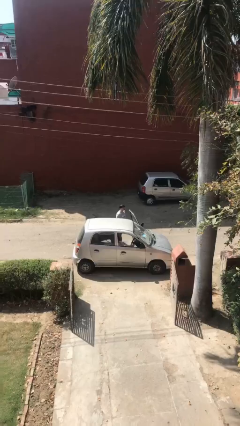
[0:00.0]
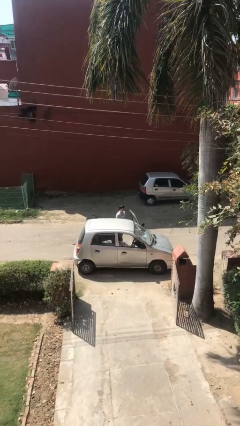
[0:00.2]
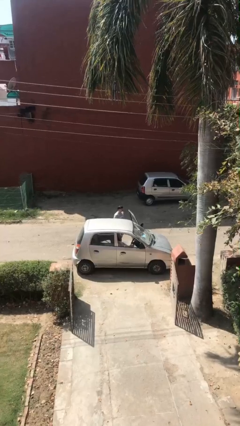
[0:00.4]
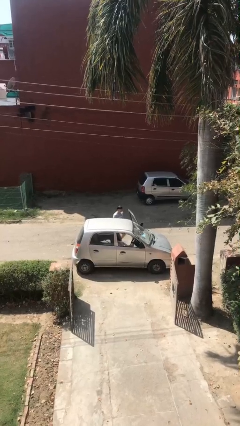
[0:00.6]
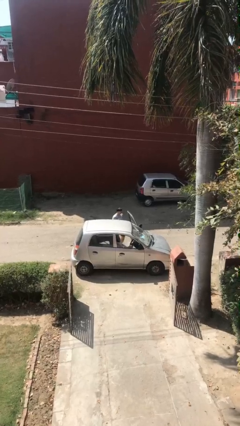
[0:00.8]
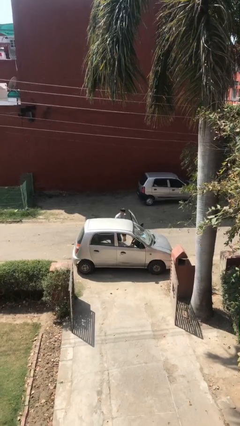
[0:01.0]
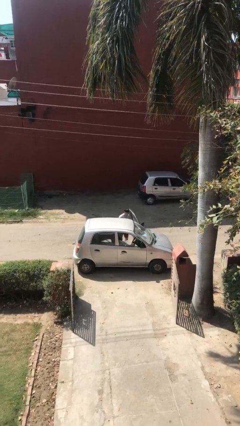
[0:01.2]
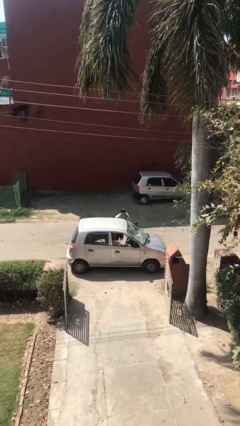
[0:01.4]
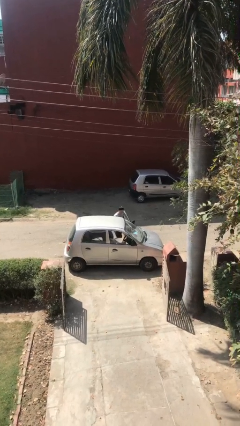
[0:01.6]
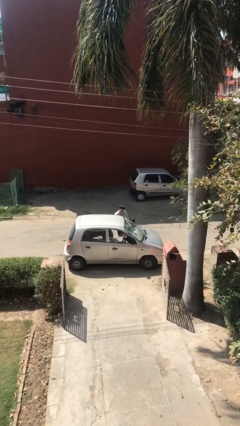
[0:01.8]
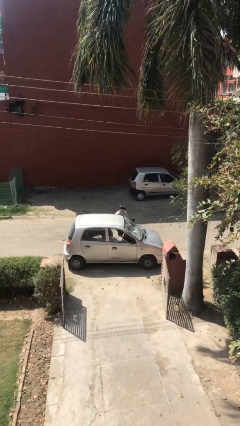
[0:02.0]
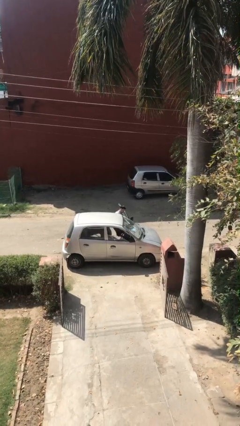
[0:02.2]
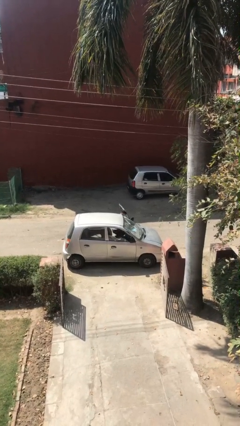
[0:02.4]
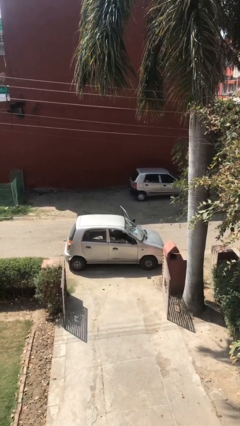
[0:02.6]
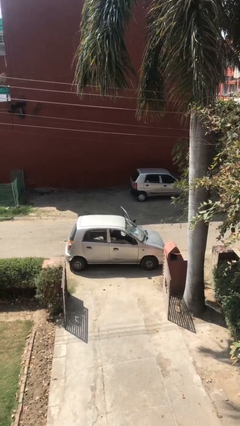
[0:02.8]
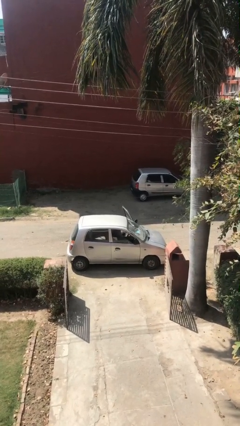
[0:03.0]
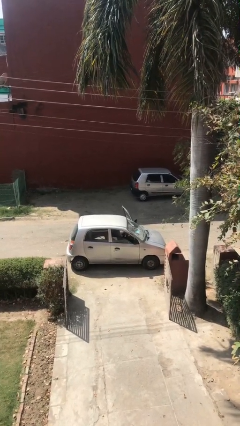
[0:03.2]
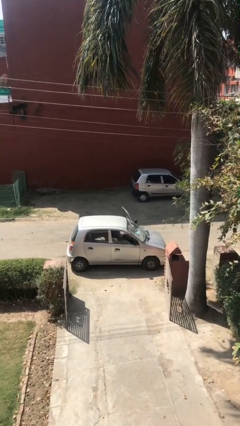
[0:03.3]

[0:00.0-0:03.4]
person enters car

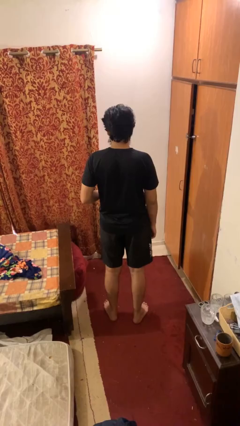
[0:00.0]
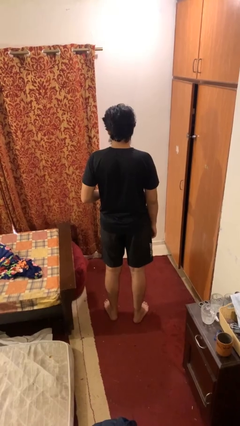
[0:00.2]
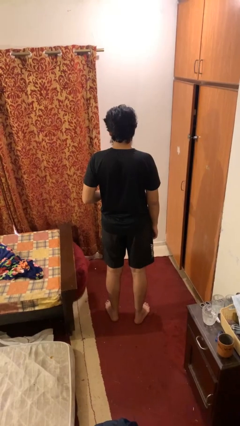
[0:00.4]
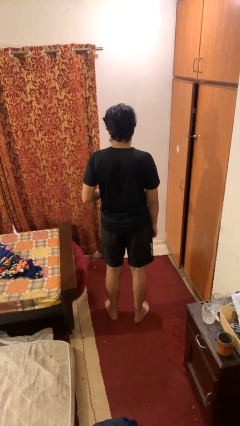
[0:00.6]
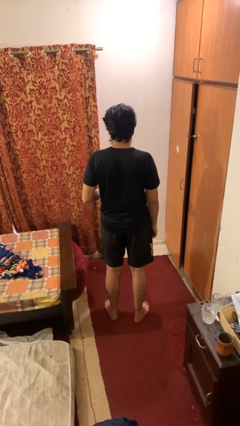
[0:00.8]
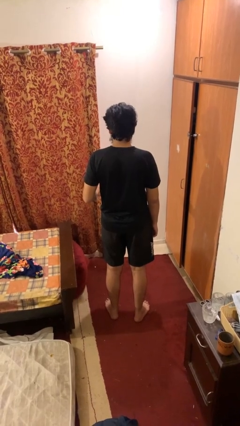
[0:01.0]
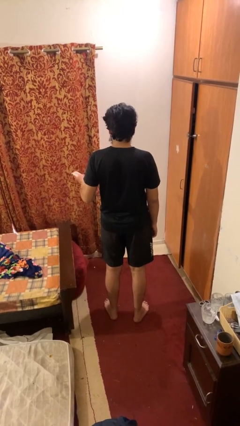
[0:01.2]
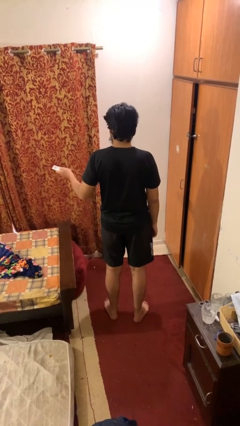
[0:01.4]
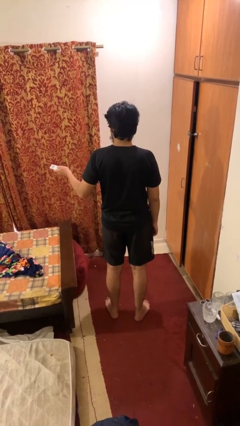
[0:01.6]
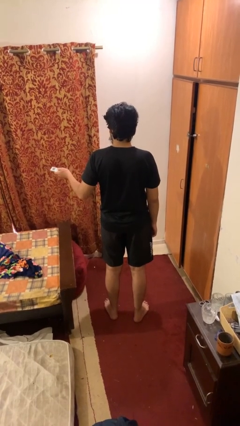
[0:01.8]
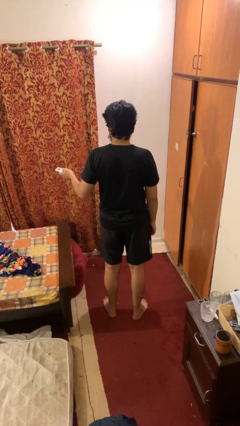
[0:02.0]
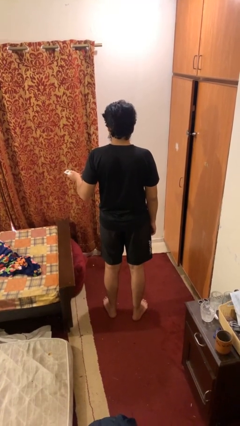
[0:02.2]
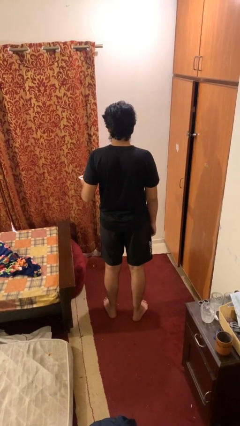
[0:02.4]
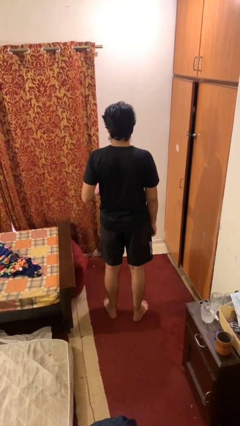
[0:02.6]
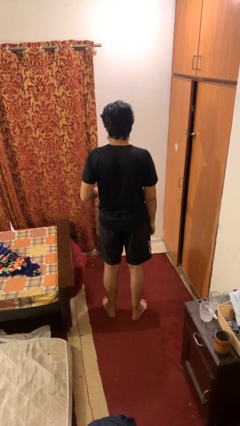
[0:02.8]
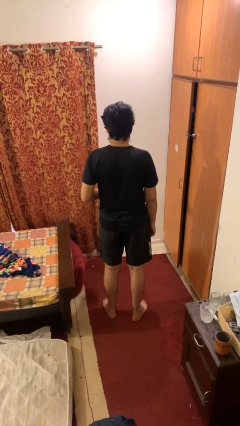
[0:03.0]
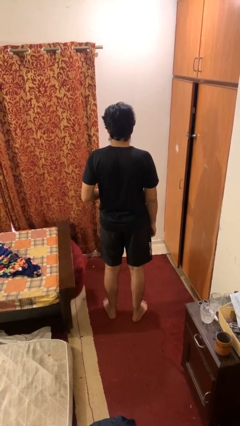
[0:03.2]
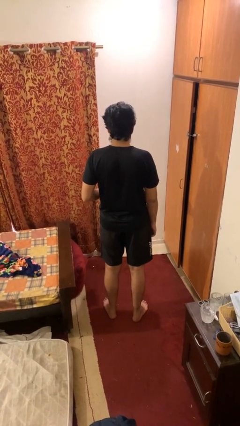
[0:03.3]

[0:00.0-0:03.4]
person uses television remote

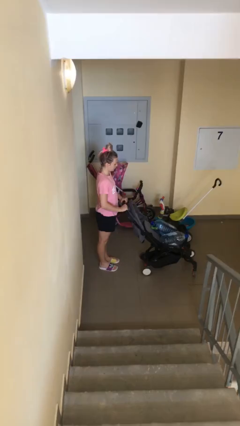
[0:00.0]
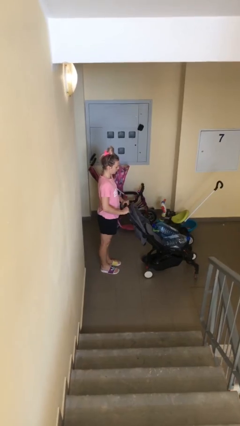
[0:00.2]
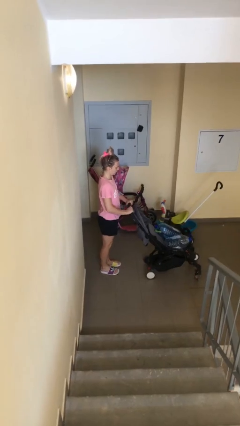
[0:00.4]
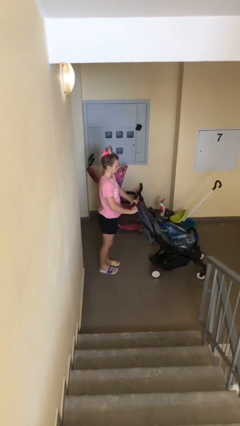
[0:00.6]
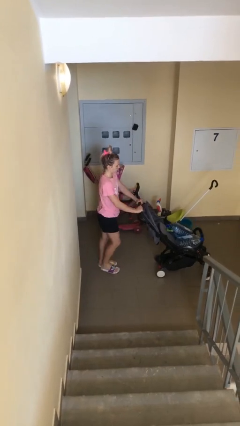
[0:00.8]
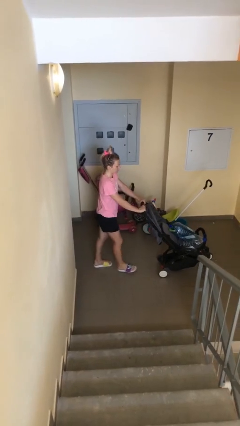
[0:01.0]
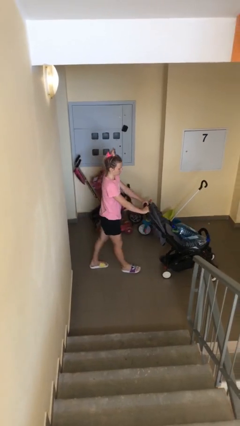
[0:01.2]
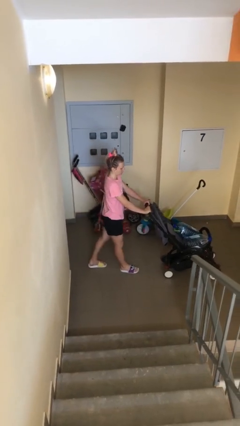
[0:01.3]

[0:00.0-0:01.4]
person pushes wheeled cart

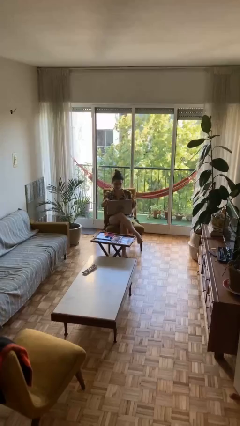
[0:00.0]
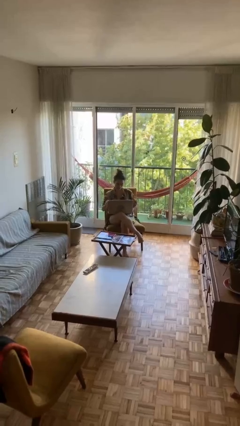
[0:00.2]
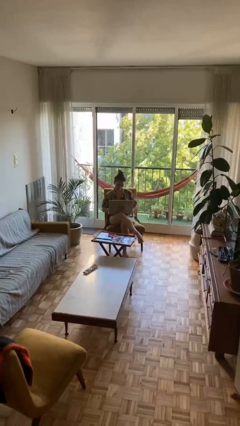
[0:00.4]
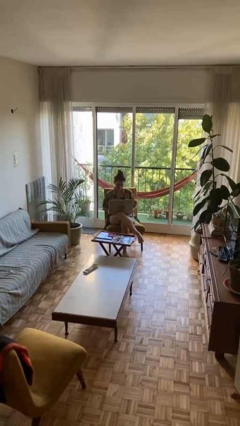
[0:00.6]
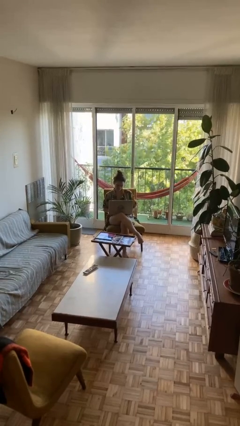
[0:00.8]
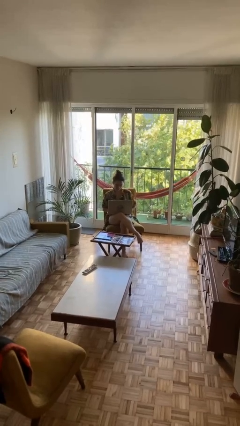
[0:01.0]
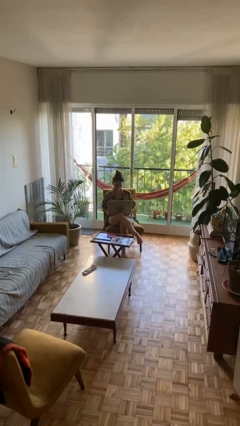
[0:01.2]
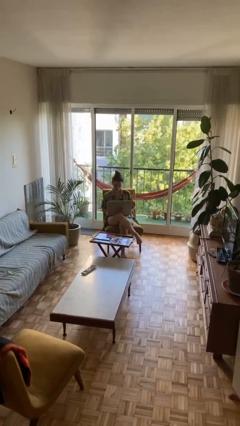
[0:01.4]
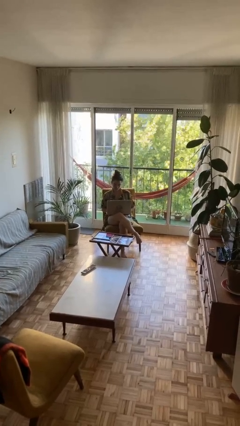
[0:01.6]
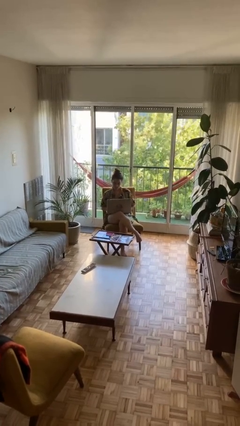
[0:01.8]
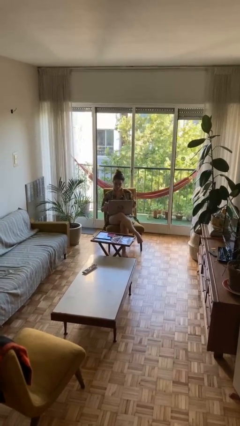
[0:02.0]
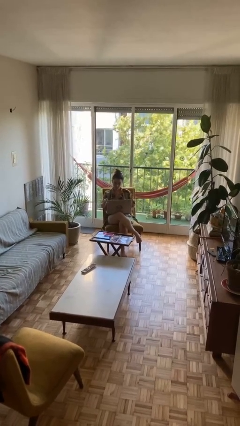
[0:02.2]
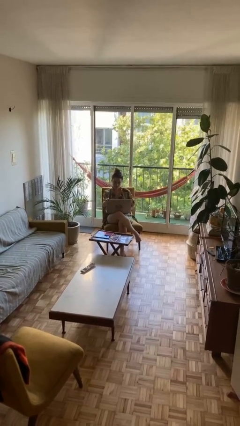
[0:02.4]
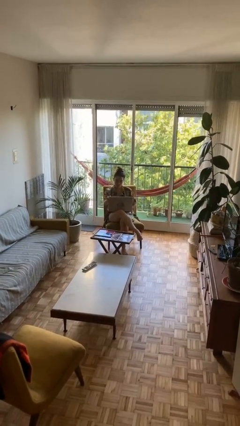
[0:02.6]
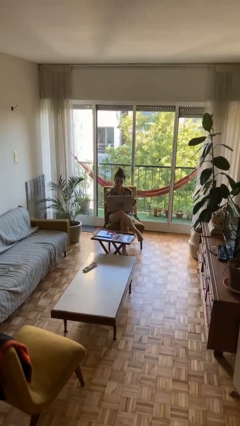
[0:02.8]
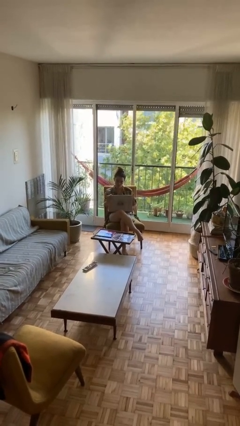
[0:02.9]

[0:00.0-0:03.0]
person interacts with laptop

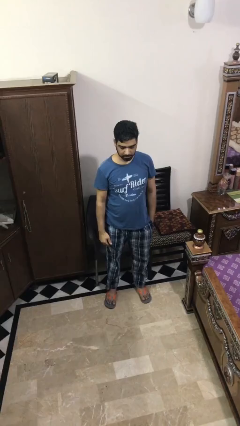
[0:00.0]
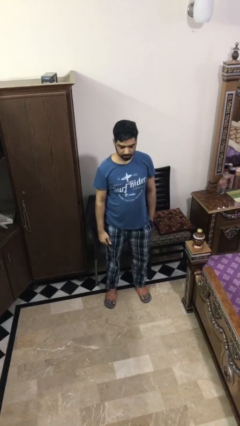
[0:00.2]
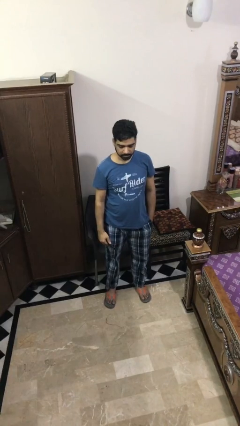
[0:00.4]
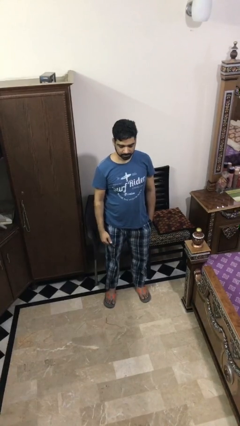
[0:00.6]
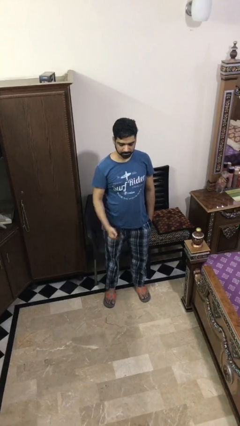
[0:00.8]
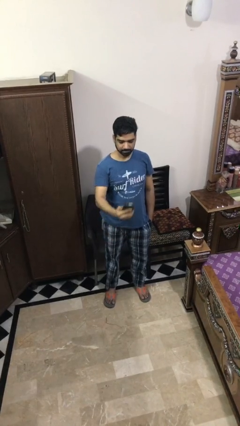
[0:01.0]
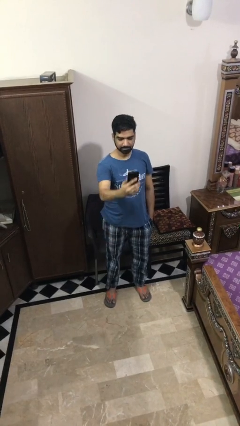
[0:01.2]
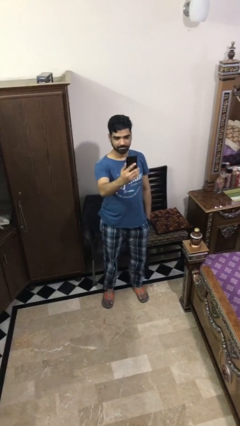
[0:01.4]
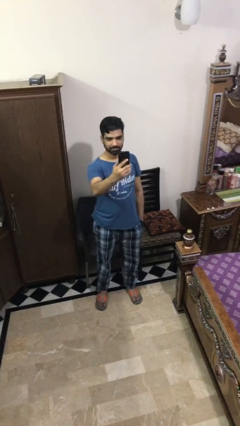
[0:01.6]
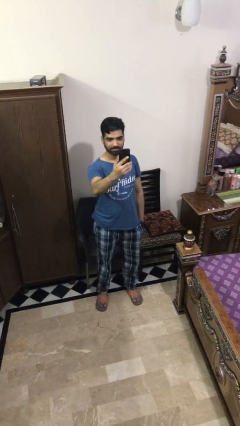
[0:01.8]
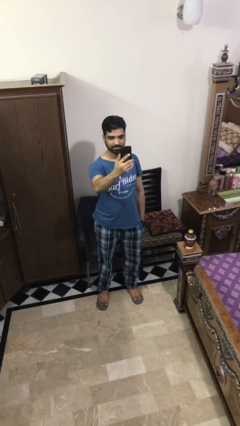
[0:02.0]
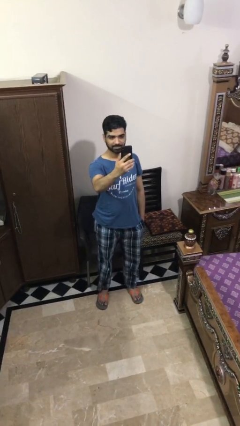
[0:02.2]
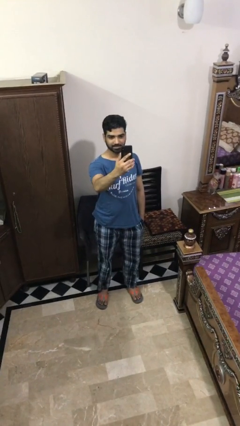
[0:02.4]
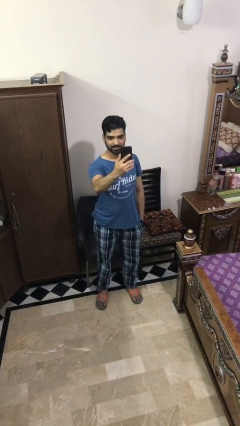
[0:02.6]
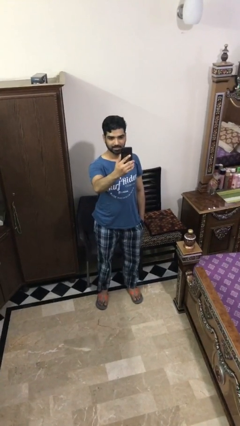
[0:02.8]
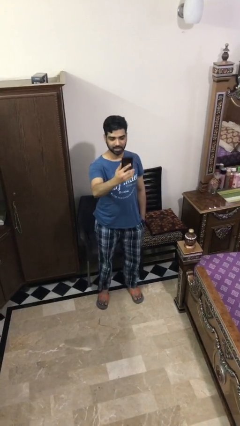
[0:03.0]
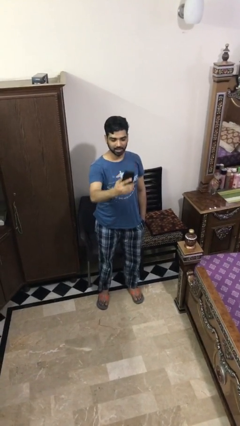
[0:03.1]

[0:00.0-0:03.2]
person takes selfie

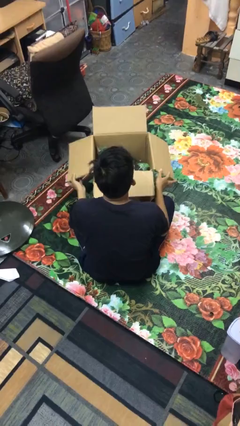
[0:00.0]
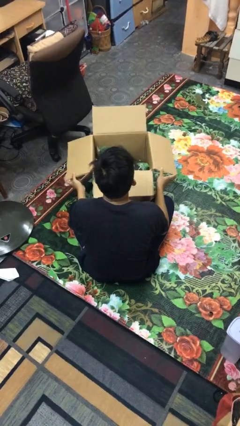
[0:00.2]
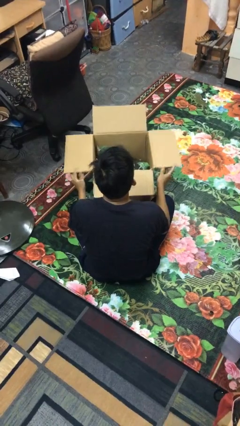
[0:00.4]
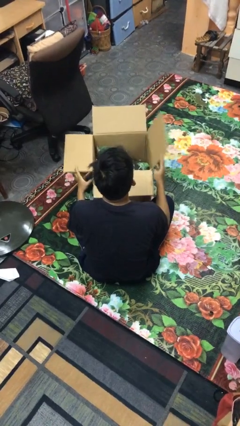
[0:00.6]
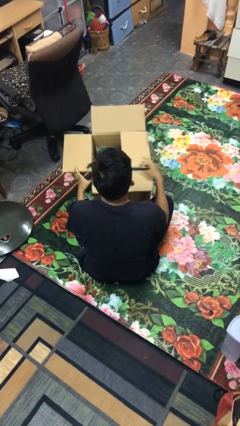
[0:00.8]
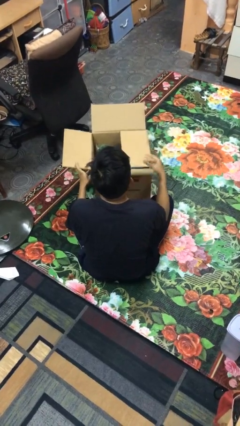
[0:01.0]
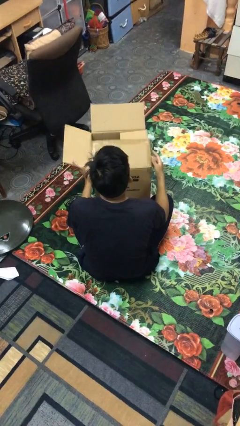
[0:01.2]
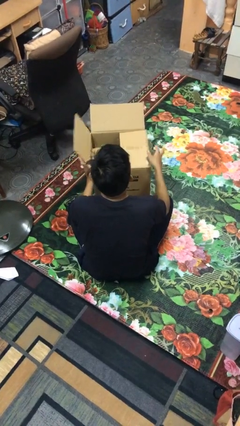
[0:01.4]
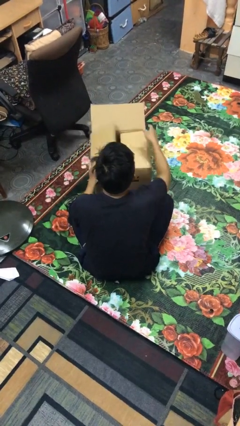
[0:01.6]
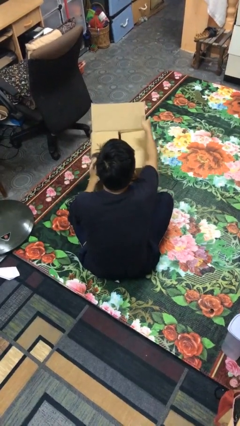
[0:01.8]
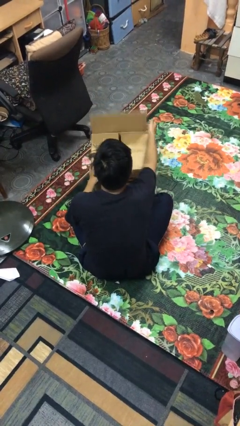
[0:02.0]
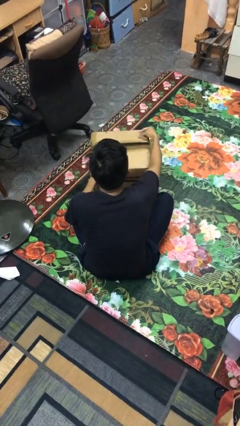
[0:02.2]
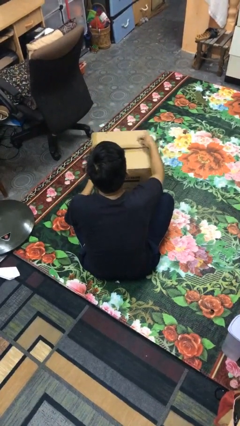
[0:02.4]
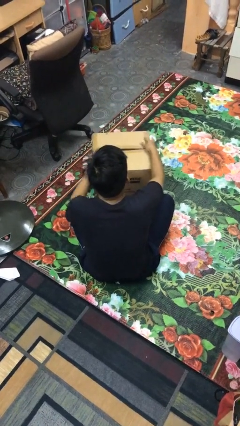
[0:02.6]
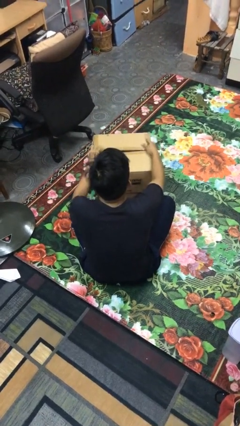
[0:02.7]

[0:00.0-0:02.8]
person closes box
